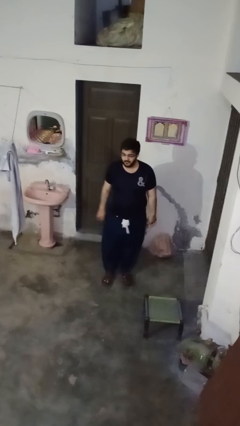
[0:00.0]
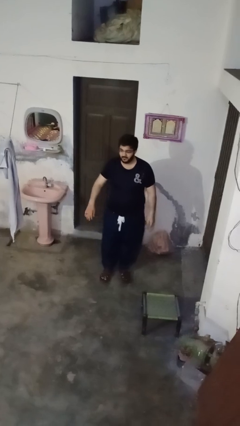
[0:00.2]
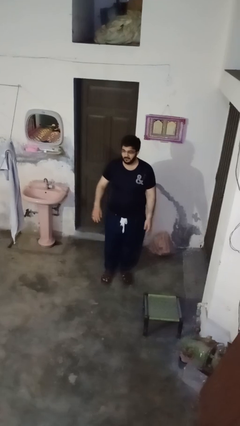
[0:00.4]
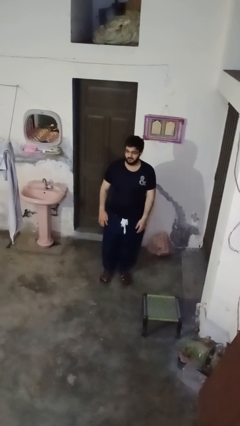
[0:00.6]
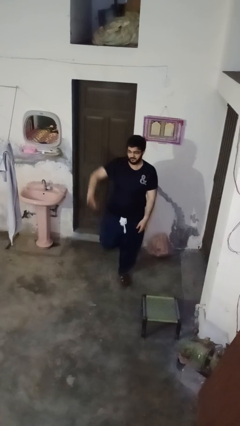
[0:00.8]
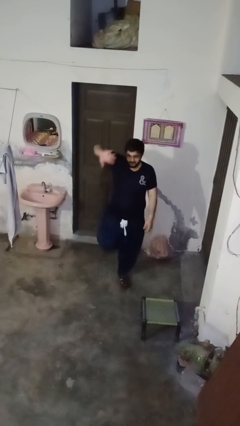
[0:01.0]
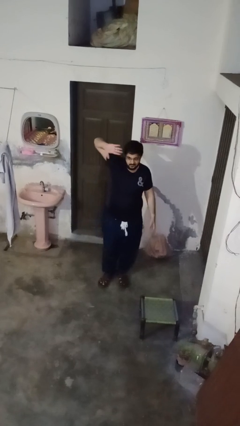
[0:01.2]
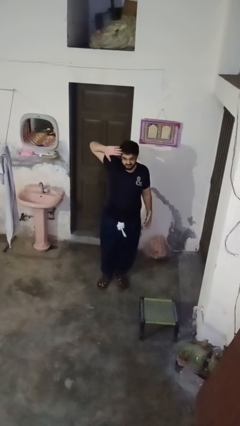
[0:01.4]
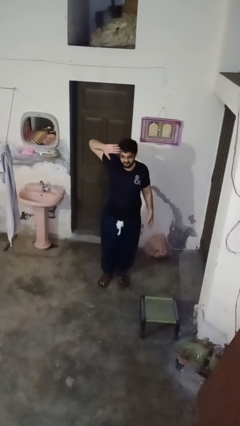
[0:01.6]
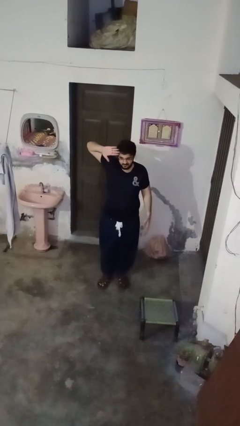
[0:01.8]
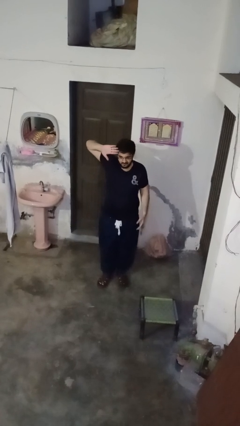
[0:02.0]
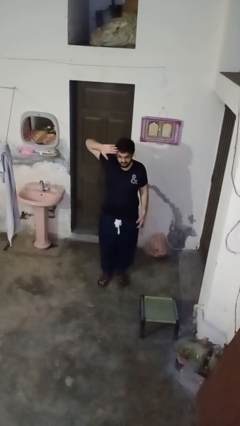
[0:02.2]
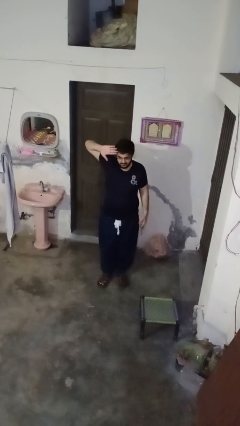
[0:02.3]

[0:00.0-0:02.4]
person salutes

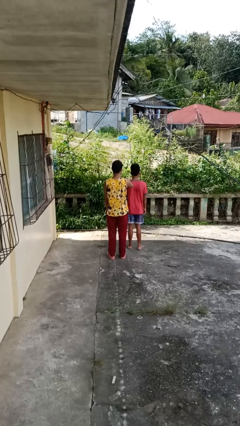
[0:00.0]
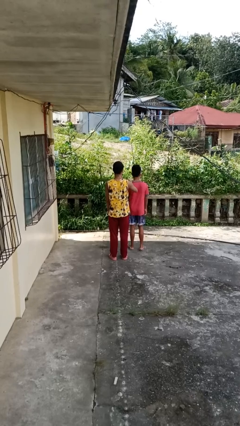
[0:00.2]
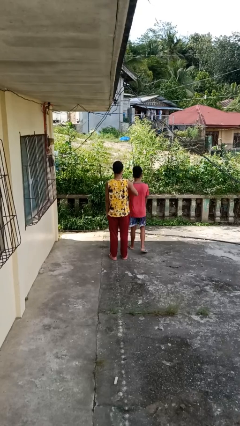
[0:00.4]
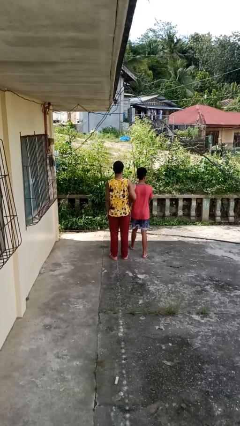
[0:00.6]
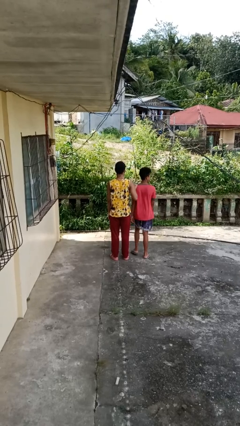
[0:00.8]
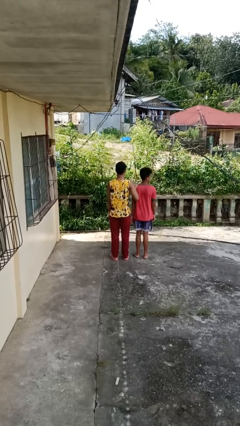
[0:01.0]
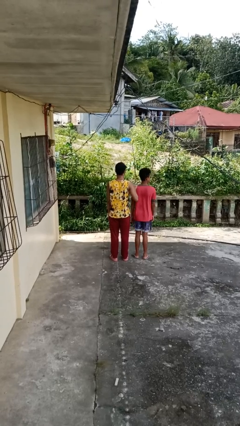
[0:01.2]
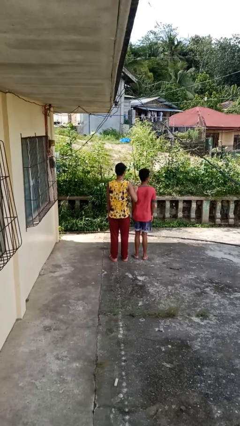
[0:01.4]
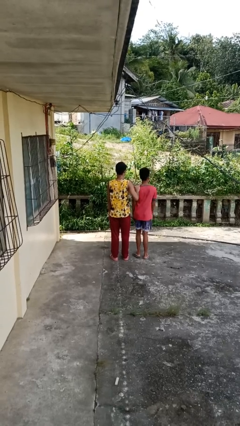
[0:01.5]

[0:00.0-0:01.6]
person grabs person by shoulder

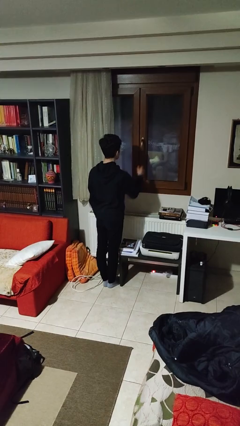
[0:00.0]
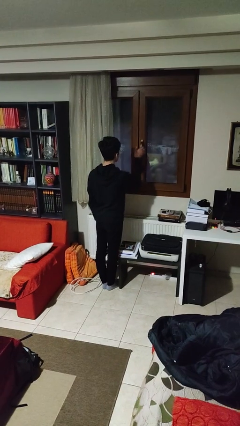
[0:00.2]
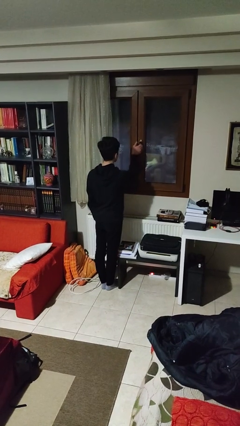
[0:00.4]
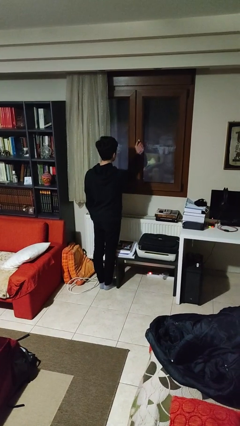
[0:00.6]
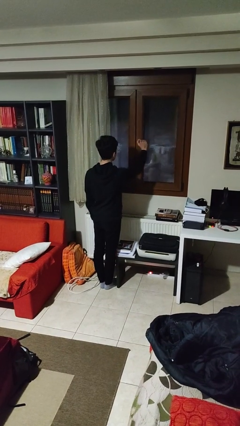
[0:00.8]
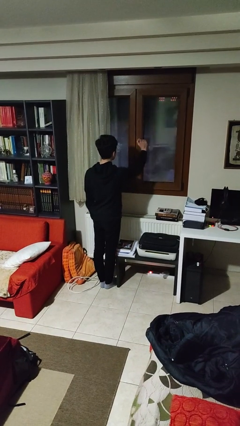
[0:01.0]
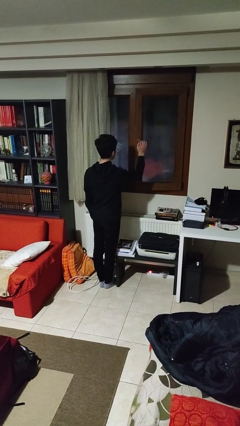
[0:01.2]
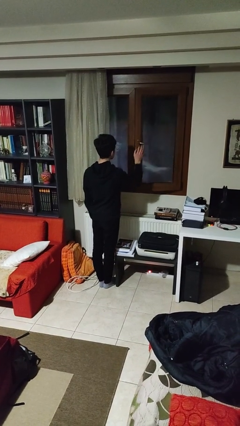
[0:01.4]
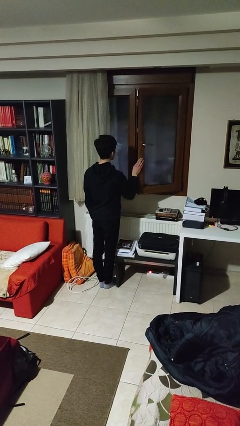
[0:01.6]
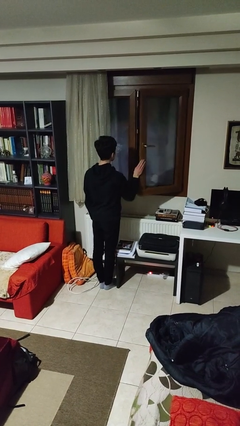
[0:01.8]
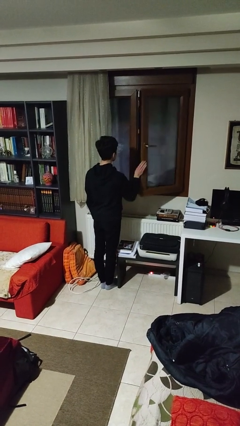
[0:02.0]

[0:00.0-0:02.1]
person opens home window

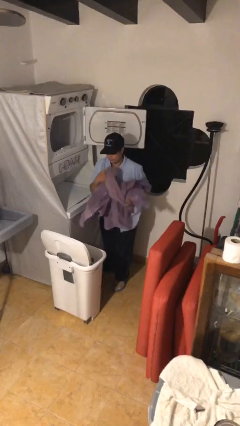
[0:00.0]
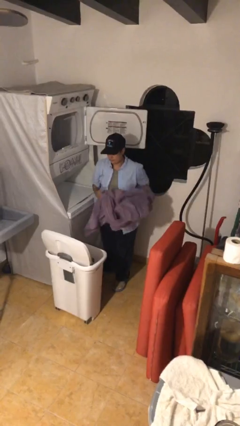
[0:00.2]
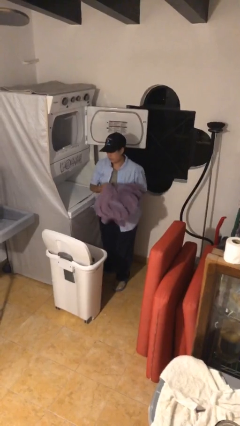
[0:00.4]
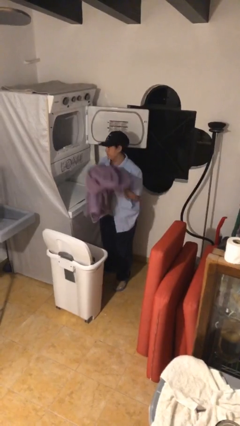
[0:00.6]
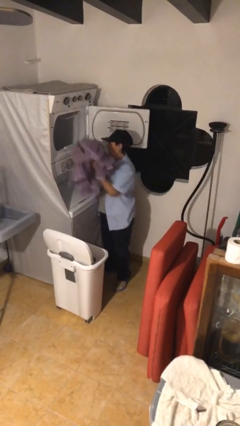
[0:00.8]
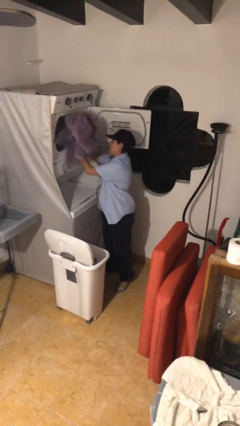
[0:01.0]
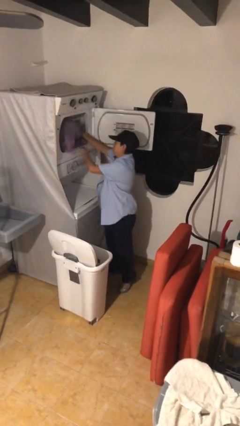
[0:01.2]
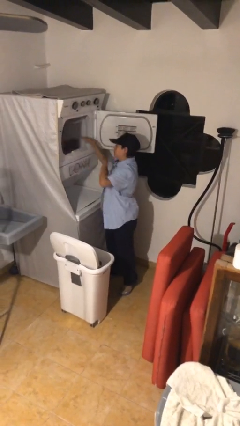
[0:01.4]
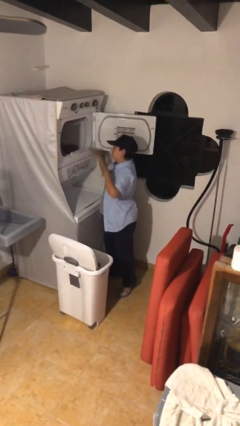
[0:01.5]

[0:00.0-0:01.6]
person loads dryer

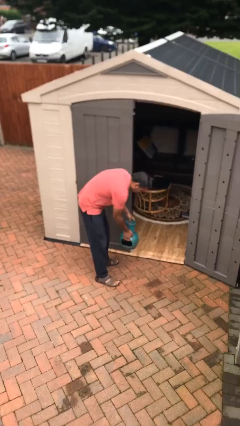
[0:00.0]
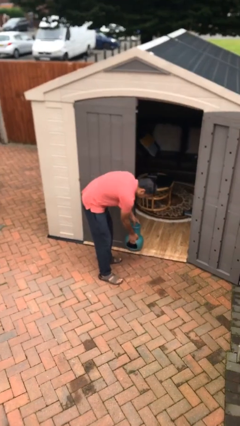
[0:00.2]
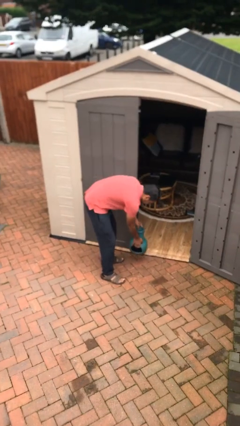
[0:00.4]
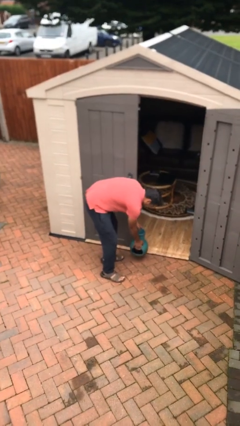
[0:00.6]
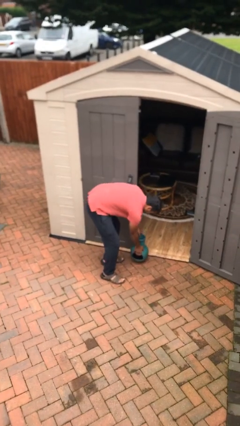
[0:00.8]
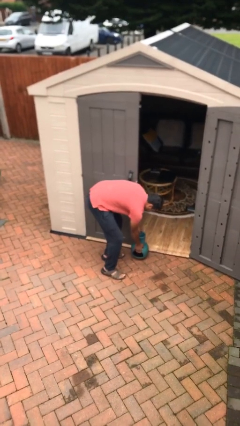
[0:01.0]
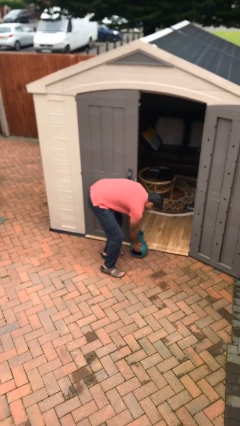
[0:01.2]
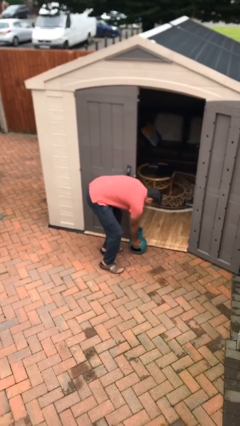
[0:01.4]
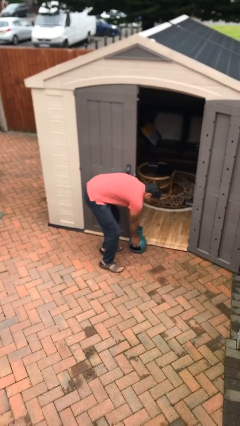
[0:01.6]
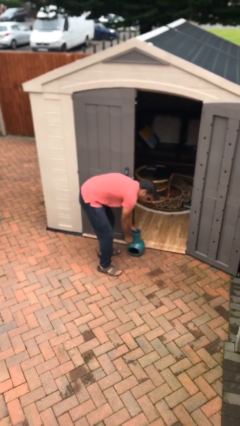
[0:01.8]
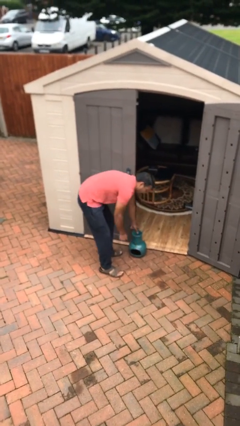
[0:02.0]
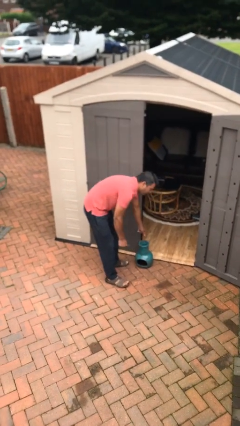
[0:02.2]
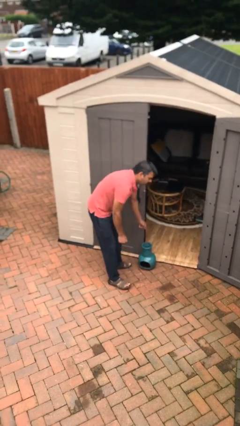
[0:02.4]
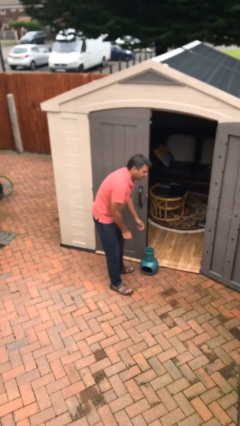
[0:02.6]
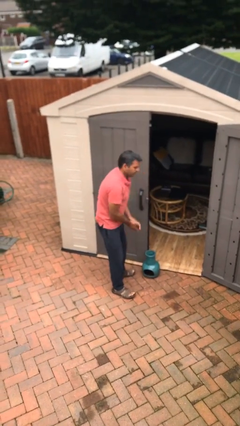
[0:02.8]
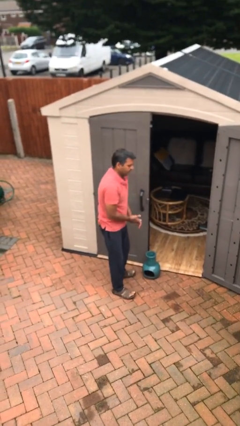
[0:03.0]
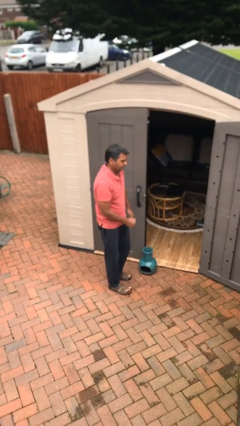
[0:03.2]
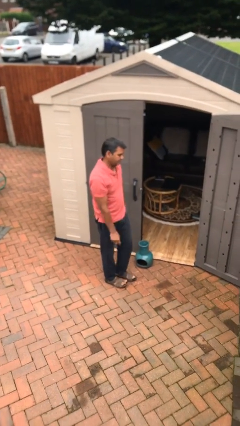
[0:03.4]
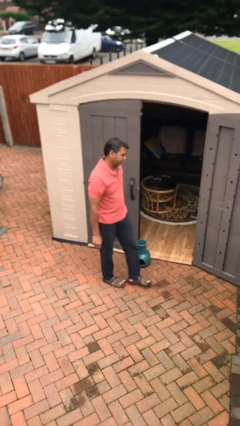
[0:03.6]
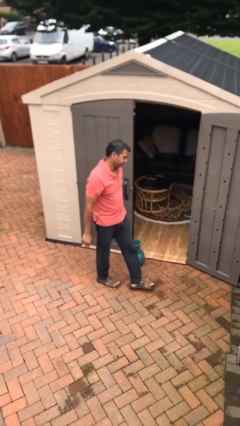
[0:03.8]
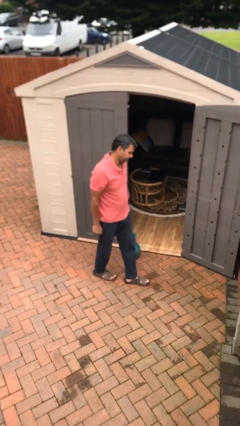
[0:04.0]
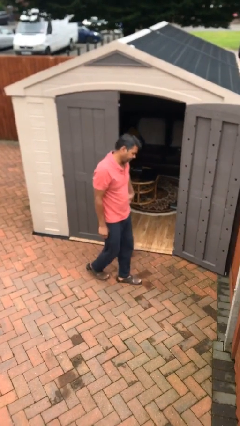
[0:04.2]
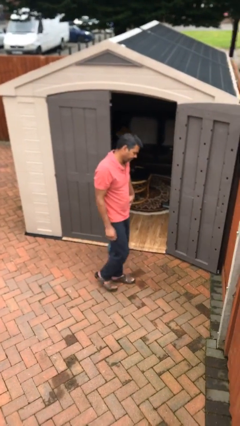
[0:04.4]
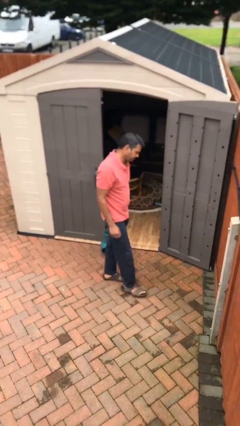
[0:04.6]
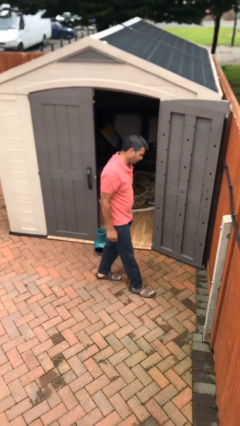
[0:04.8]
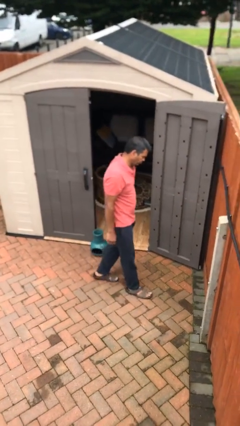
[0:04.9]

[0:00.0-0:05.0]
person puts down object on floor

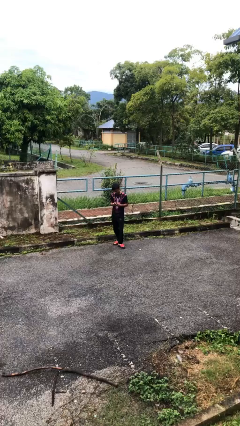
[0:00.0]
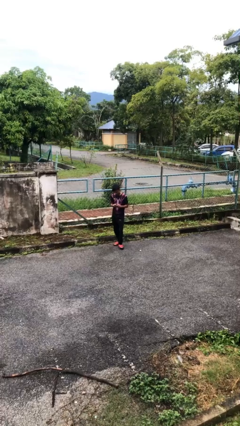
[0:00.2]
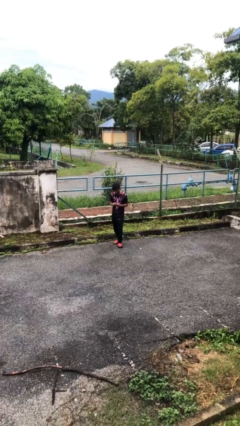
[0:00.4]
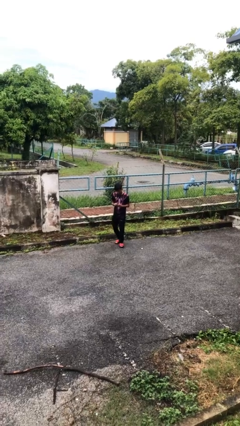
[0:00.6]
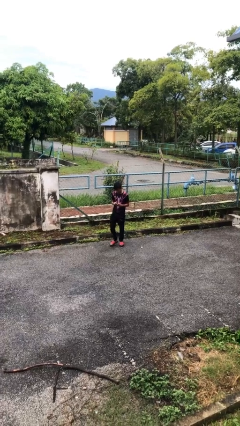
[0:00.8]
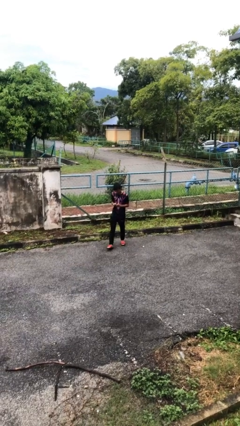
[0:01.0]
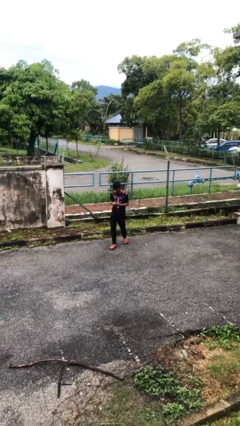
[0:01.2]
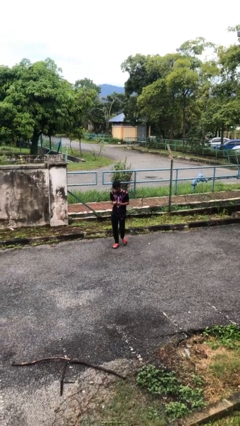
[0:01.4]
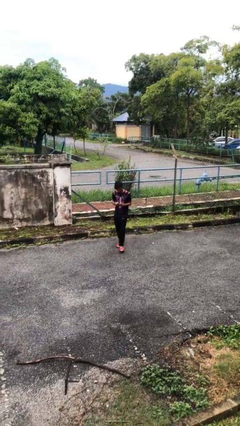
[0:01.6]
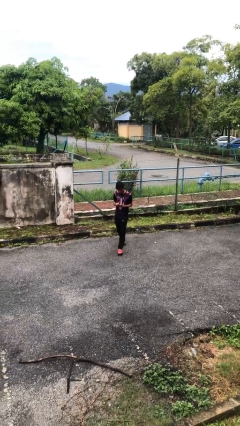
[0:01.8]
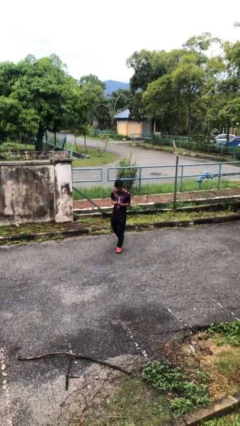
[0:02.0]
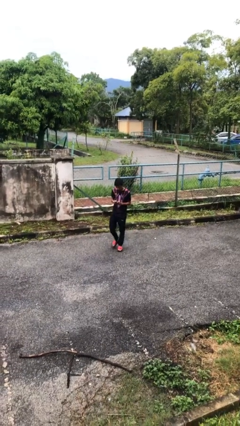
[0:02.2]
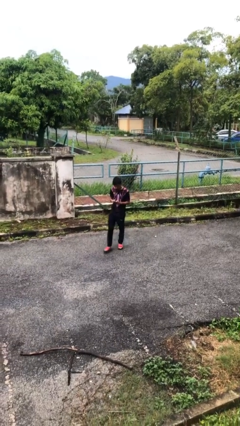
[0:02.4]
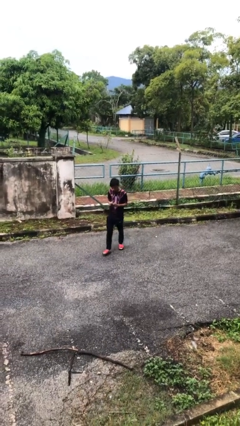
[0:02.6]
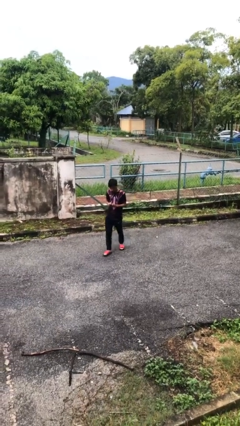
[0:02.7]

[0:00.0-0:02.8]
person texts on phone

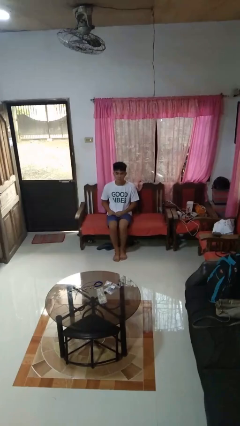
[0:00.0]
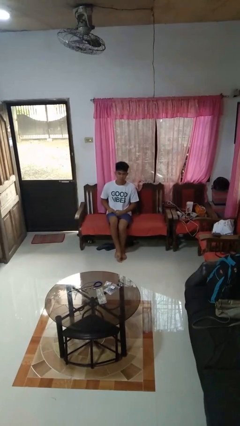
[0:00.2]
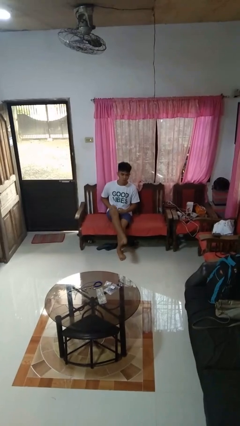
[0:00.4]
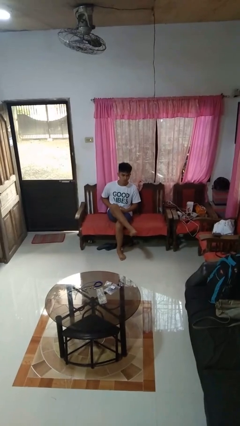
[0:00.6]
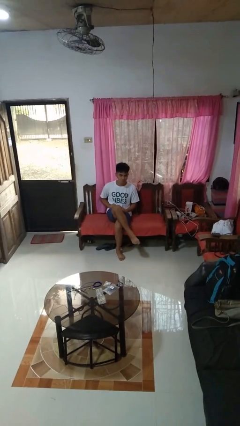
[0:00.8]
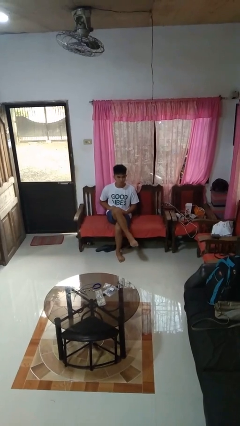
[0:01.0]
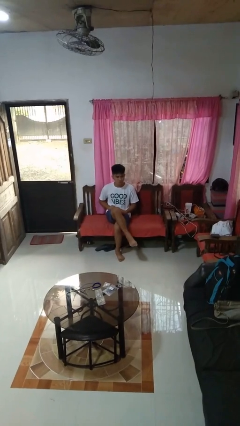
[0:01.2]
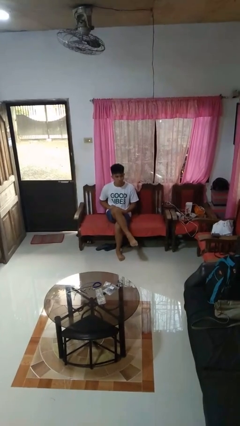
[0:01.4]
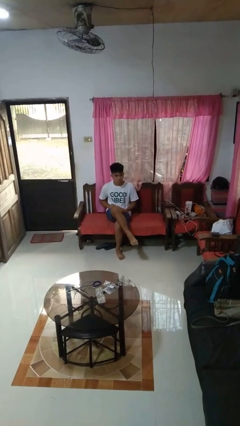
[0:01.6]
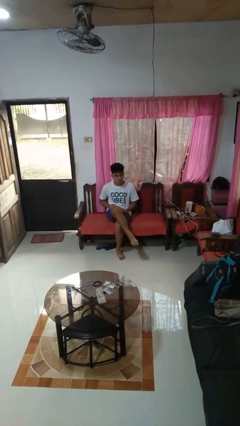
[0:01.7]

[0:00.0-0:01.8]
person crosses legs
